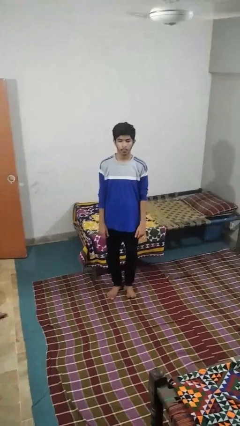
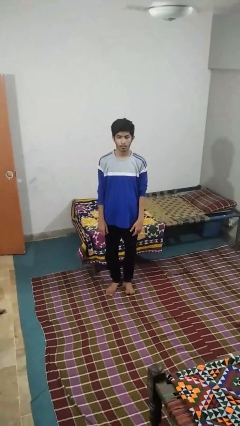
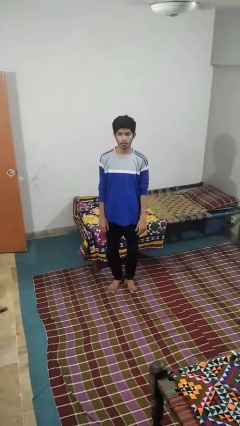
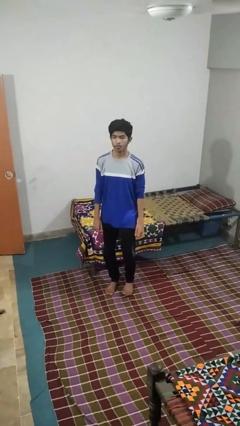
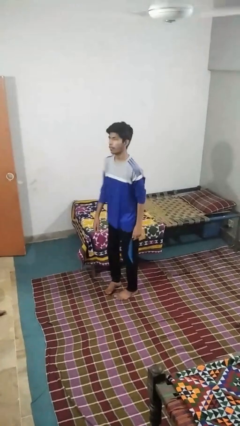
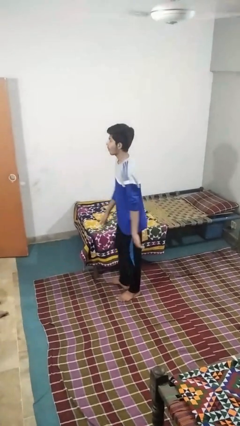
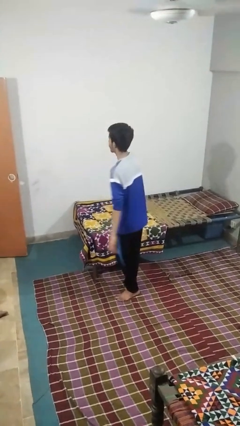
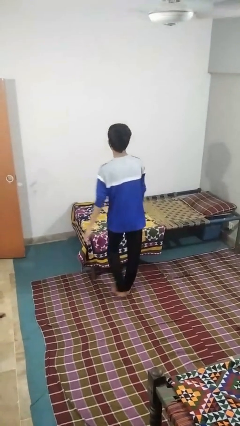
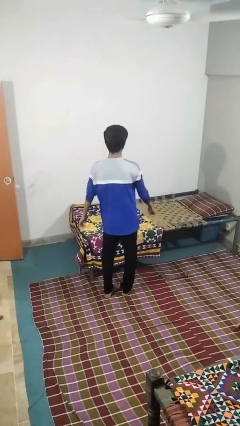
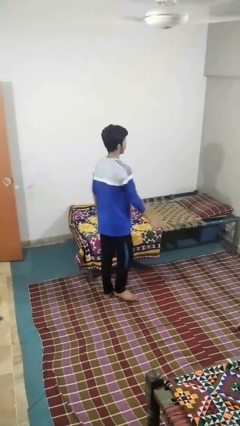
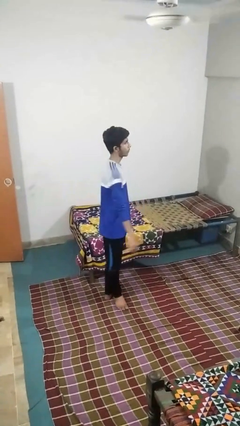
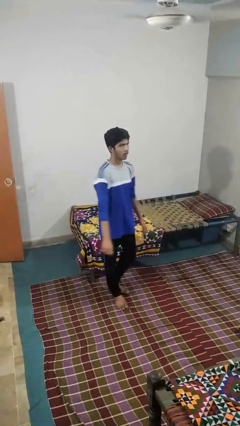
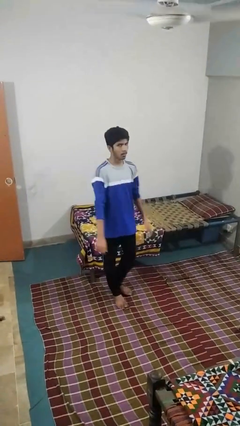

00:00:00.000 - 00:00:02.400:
person twirls

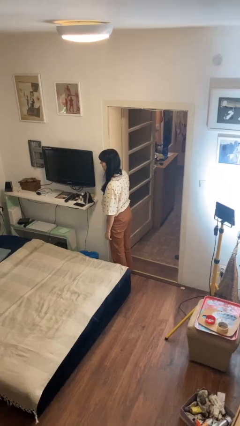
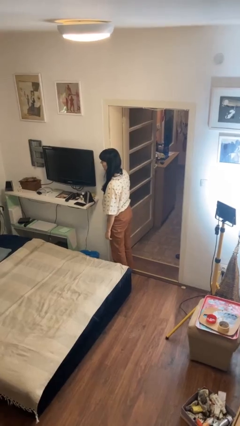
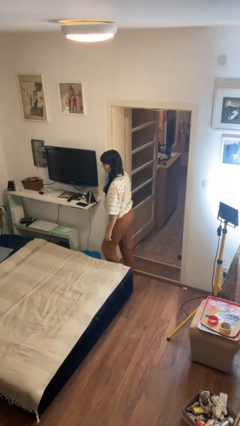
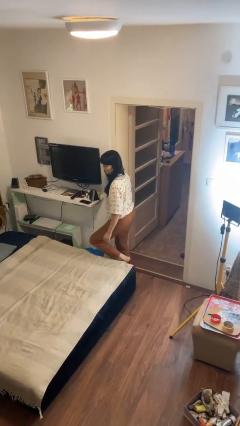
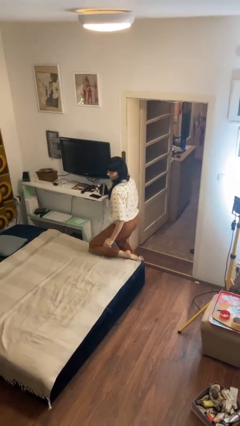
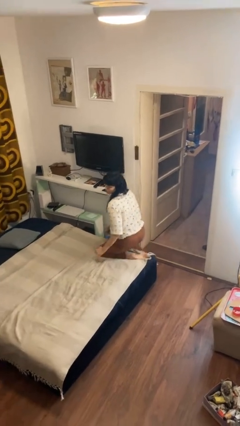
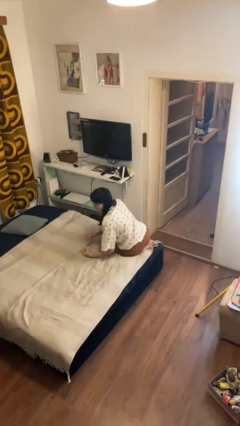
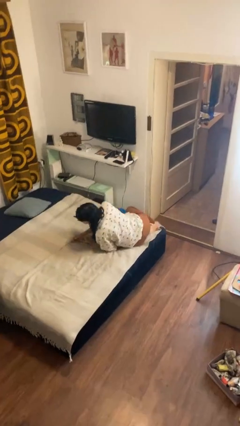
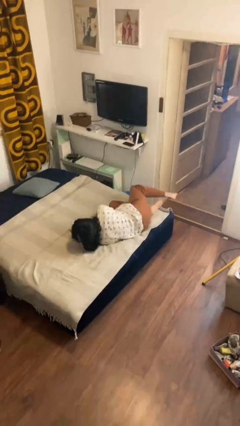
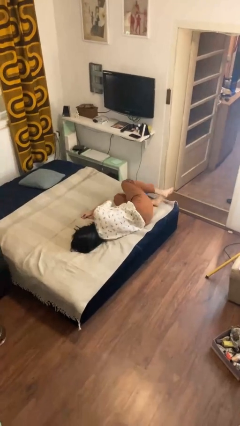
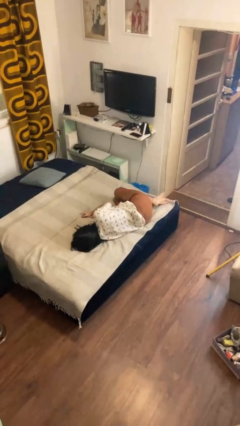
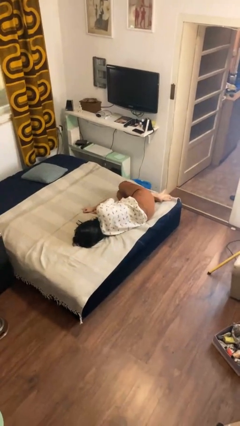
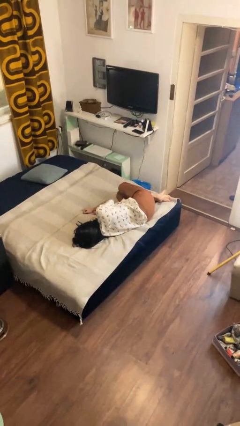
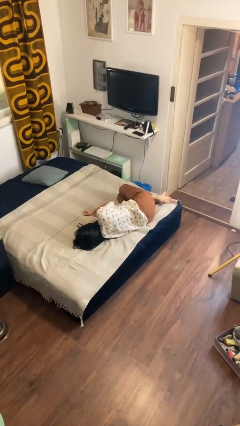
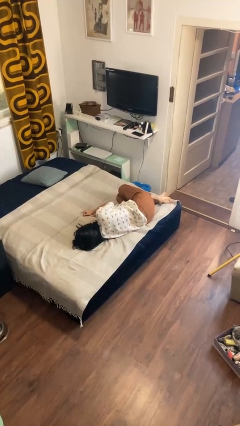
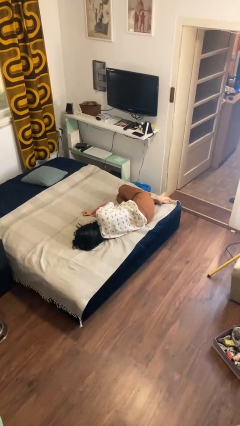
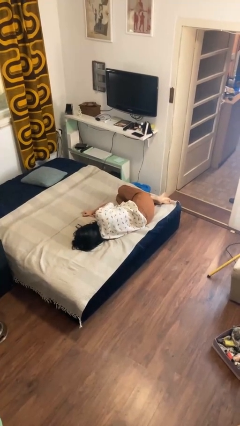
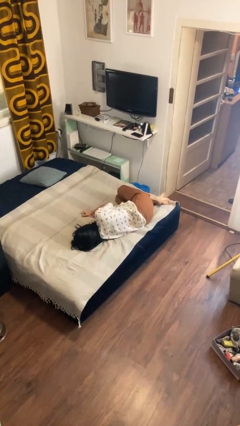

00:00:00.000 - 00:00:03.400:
person lies down on bed

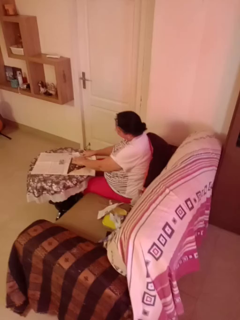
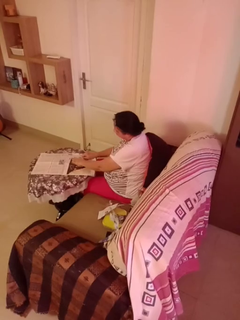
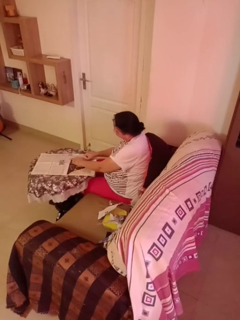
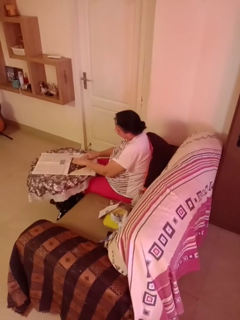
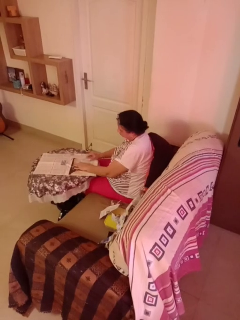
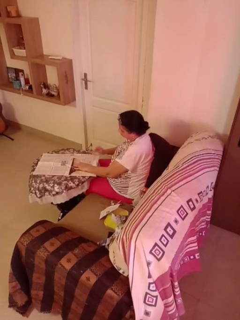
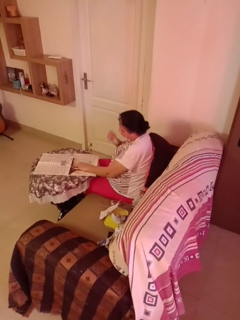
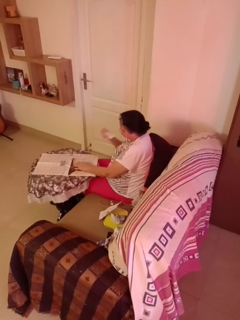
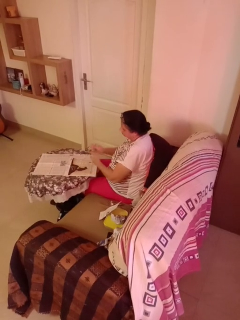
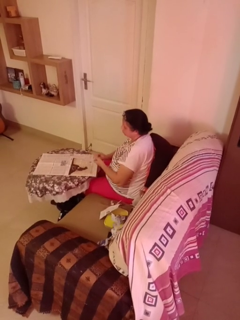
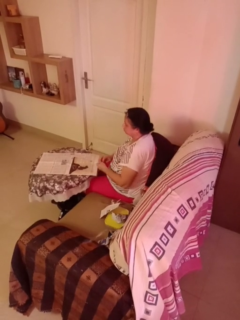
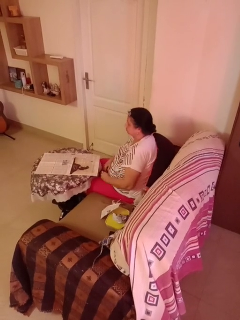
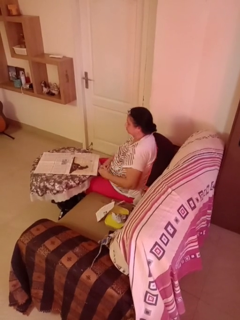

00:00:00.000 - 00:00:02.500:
person tears paper

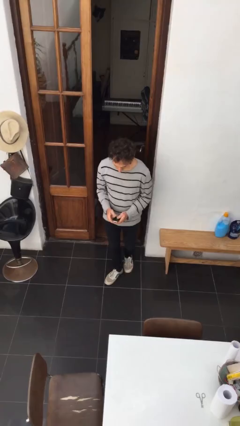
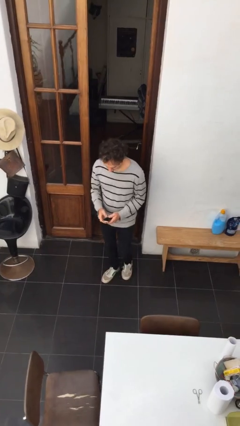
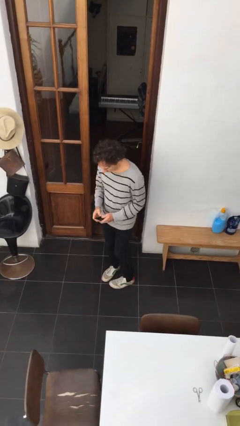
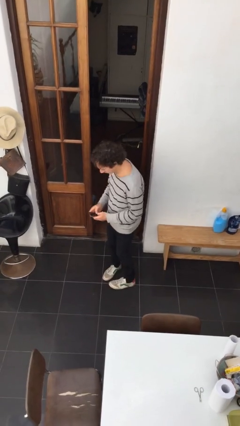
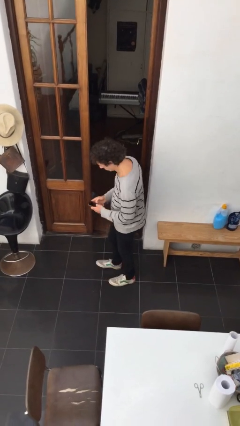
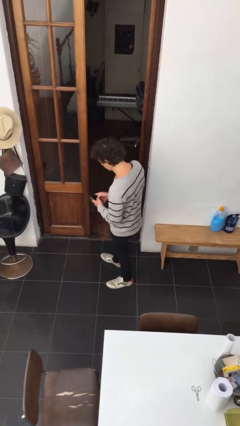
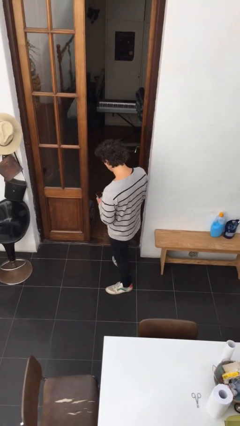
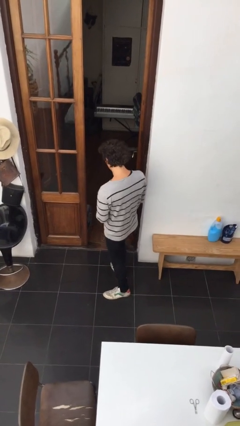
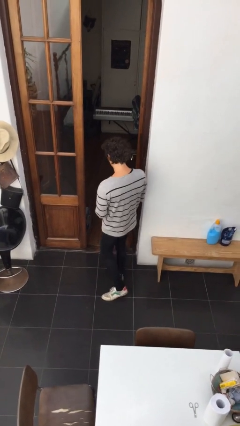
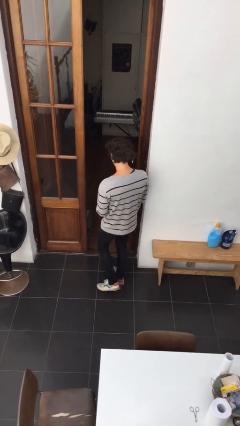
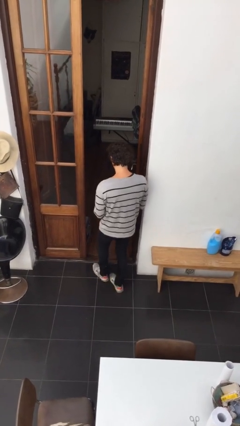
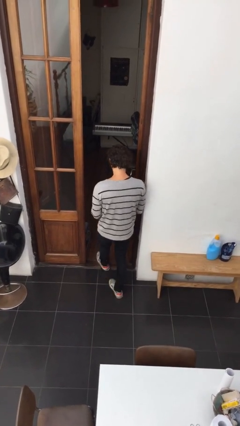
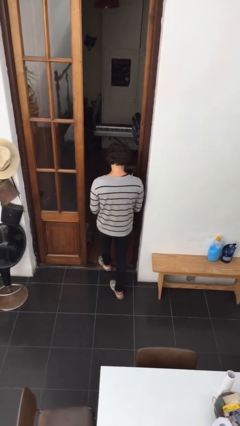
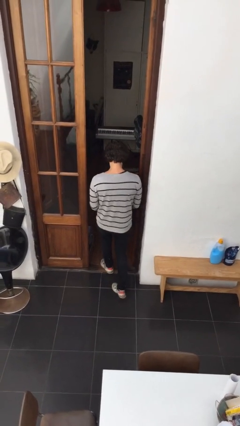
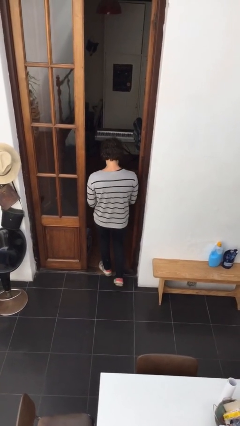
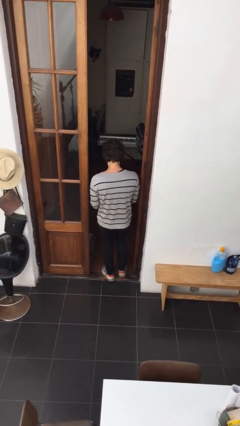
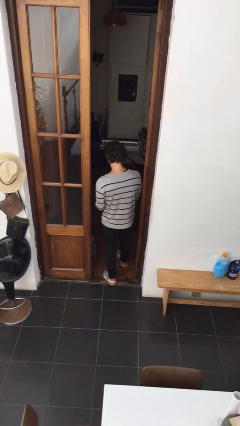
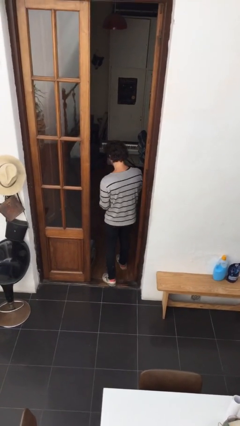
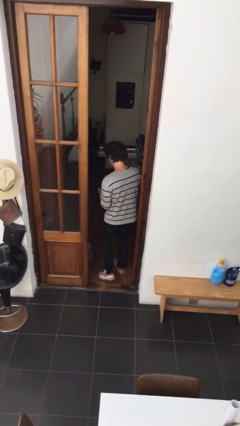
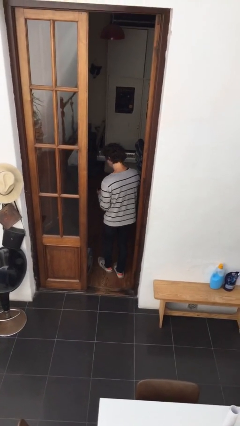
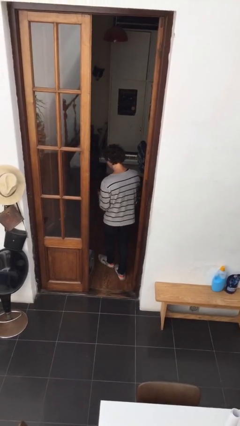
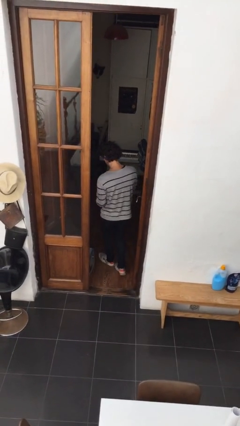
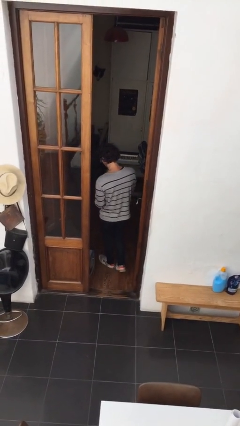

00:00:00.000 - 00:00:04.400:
person exits scene through structure

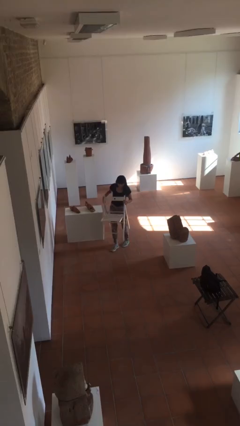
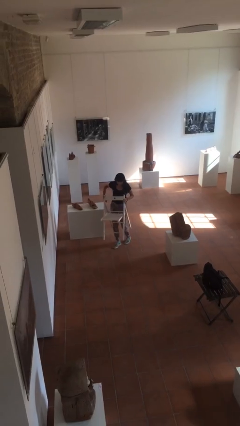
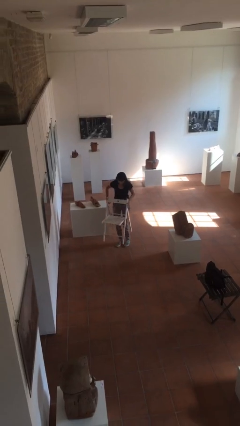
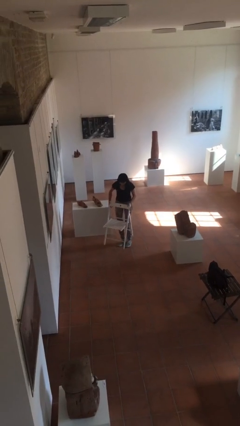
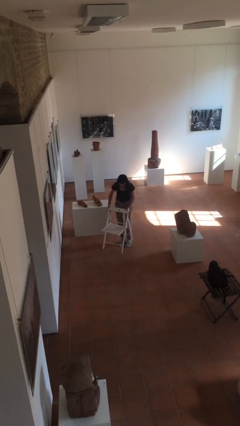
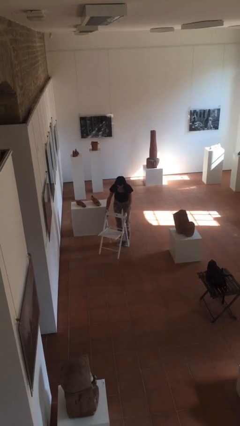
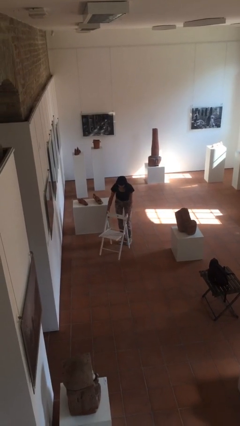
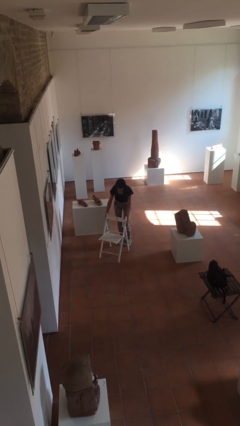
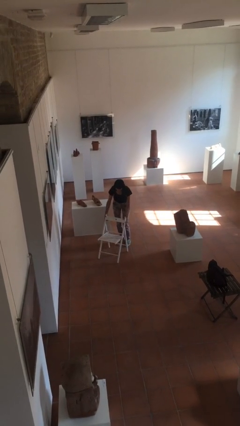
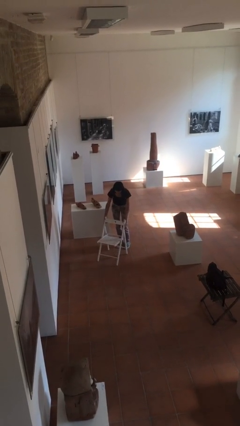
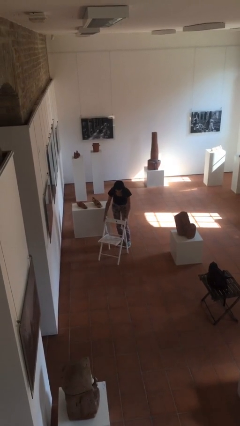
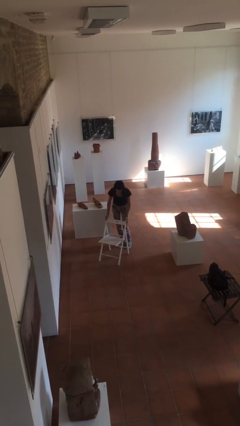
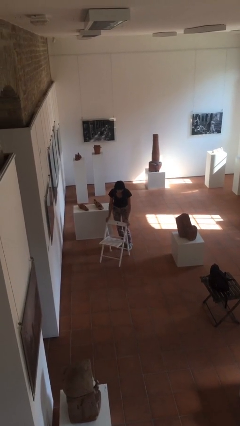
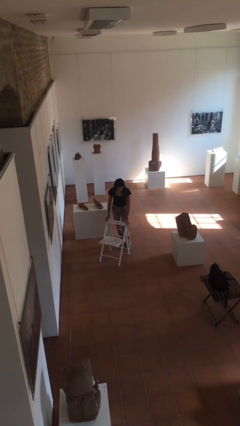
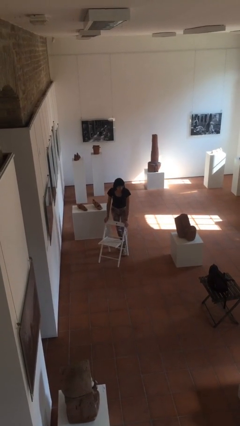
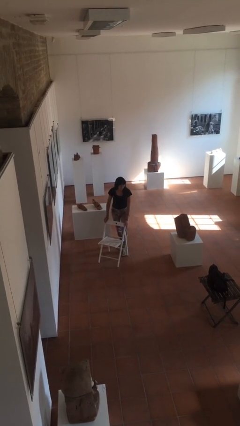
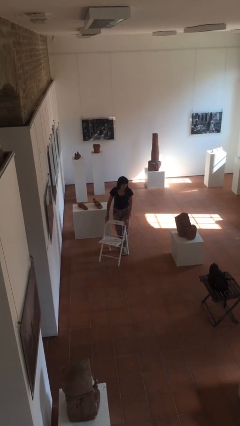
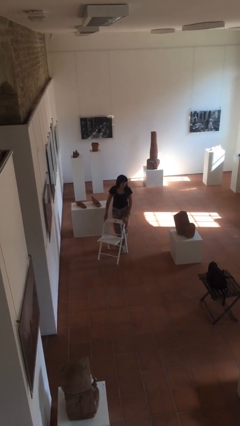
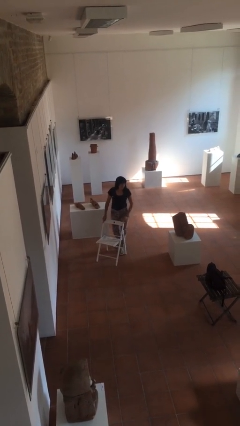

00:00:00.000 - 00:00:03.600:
person puts down object on floor

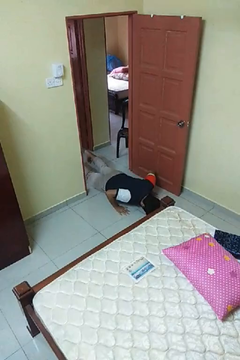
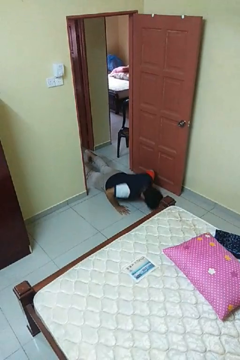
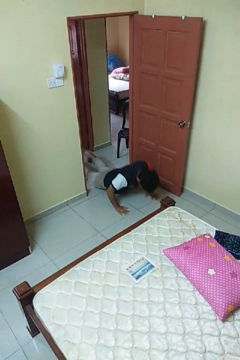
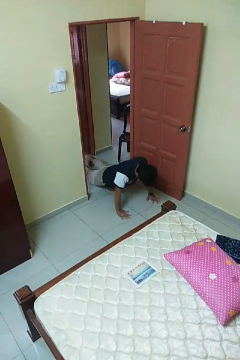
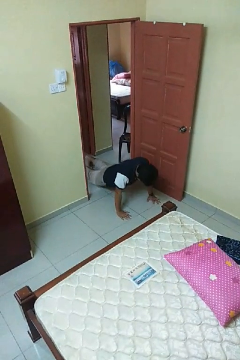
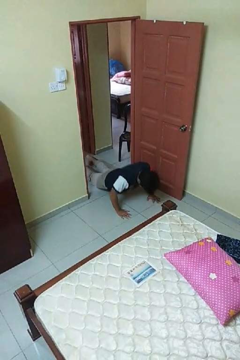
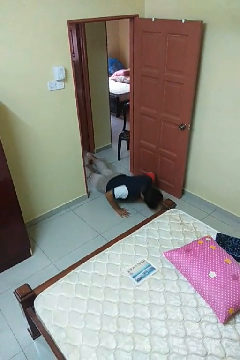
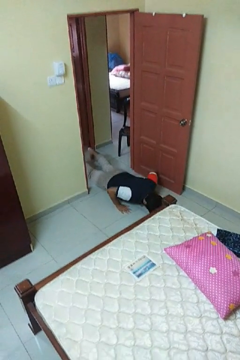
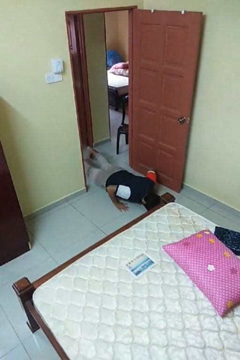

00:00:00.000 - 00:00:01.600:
person exercises with pushup
